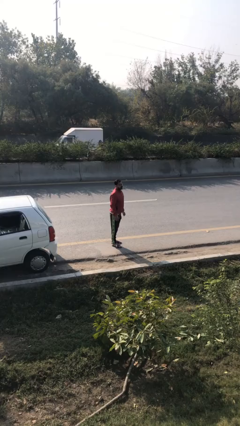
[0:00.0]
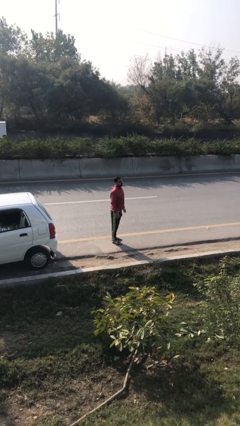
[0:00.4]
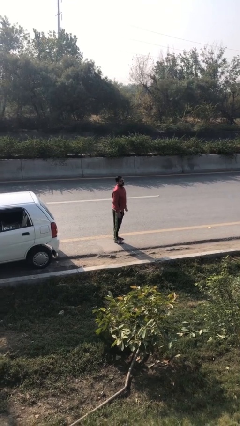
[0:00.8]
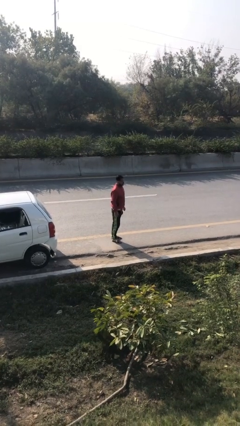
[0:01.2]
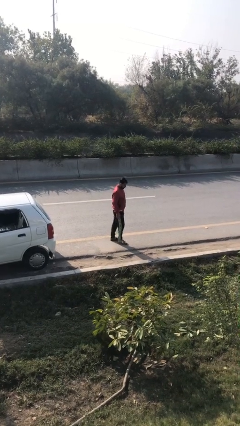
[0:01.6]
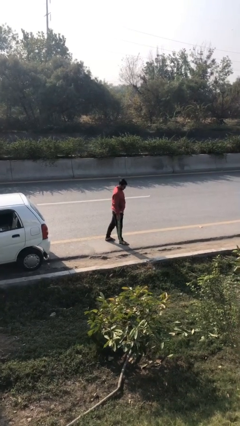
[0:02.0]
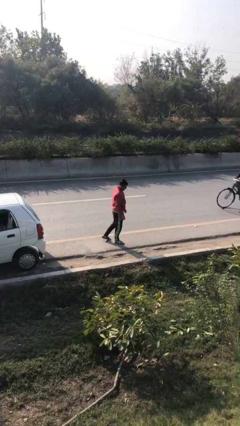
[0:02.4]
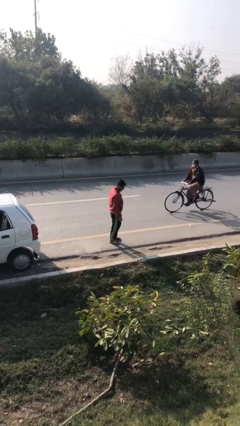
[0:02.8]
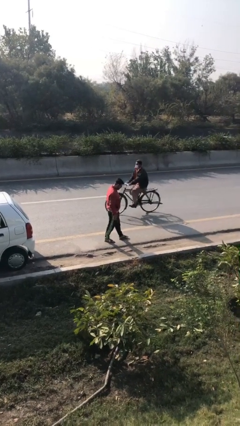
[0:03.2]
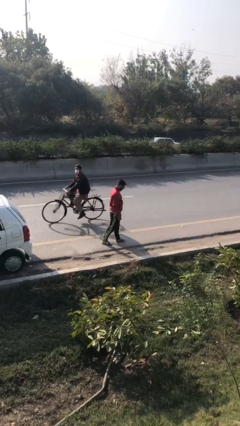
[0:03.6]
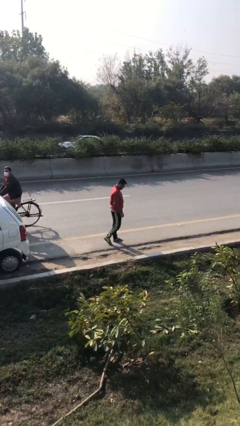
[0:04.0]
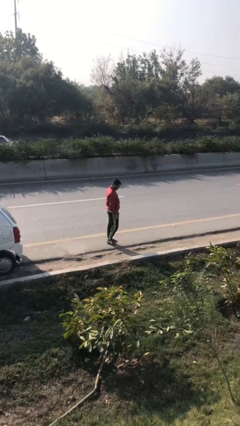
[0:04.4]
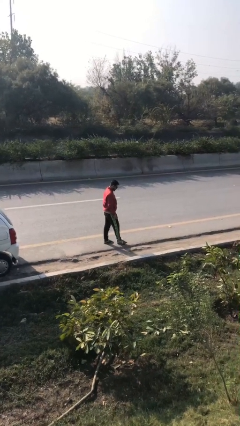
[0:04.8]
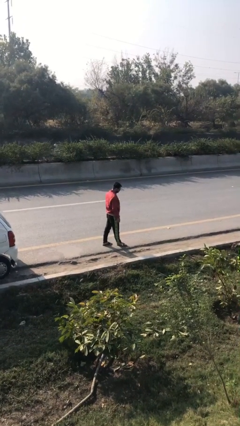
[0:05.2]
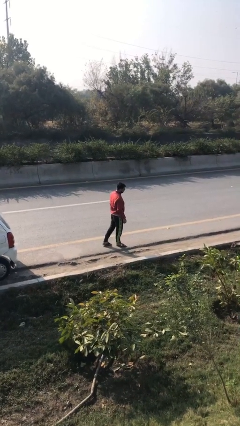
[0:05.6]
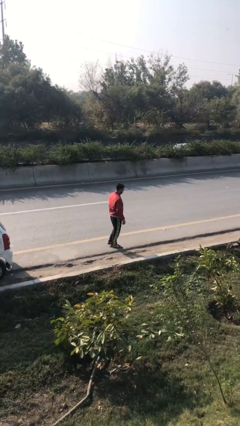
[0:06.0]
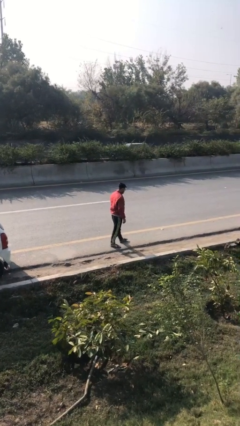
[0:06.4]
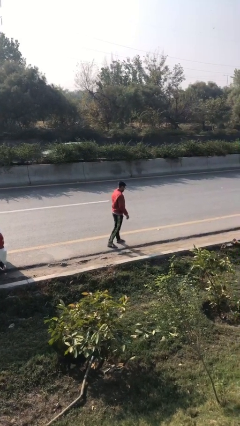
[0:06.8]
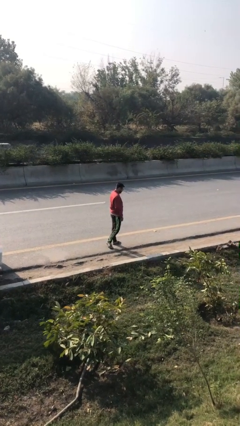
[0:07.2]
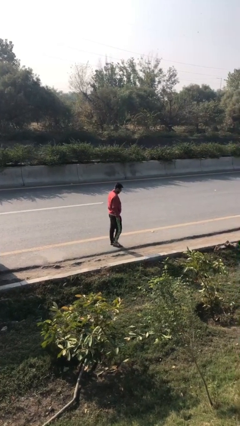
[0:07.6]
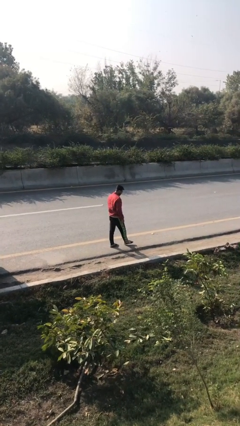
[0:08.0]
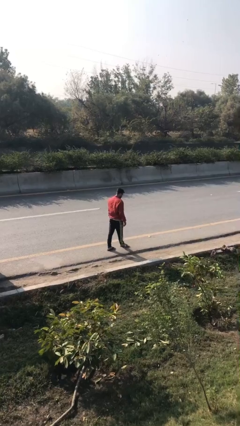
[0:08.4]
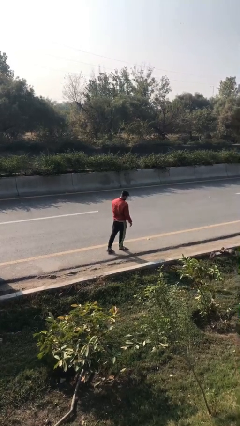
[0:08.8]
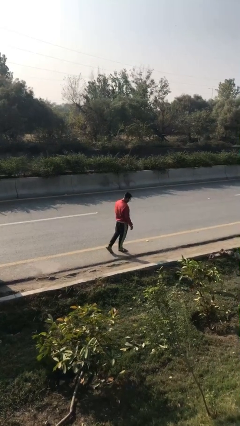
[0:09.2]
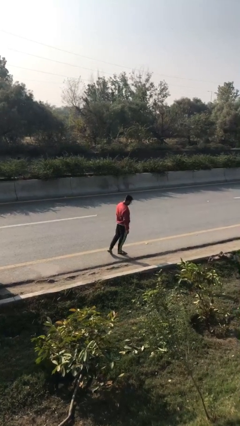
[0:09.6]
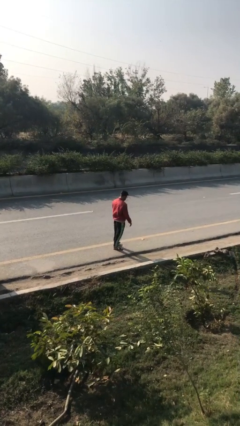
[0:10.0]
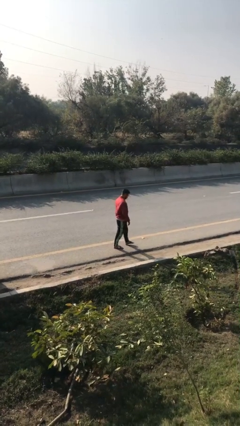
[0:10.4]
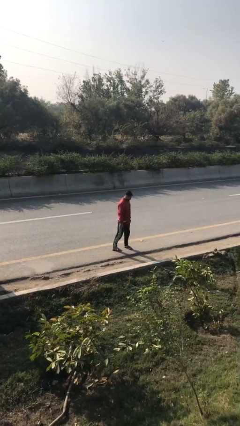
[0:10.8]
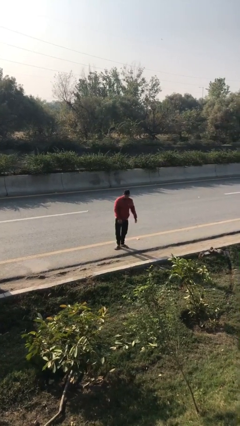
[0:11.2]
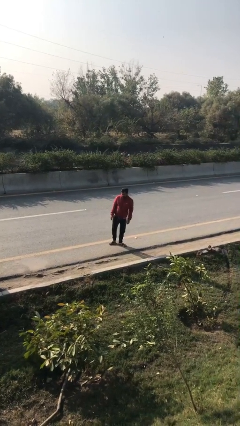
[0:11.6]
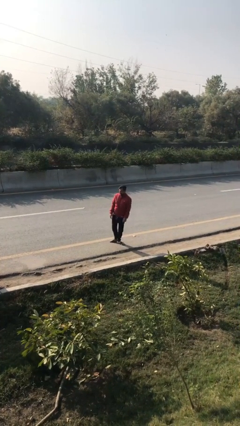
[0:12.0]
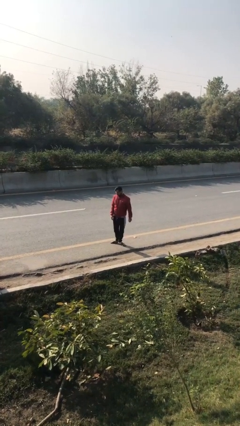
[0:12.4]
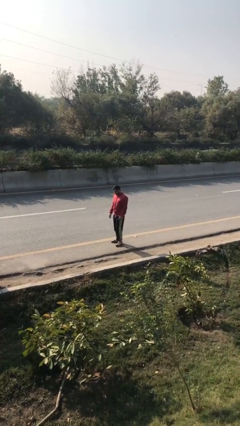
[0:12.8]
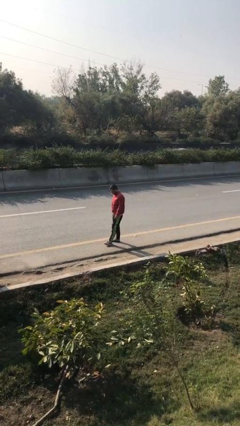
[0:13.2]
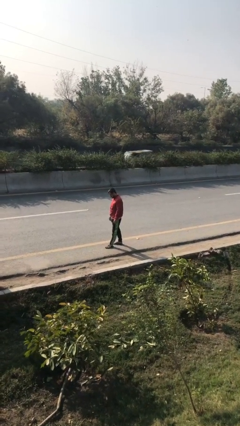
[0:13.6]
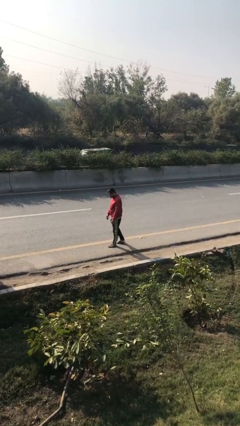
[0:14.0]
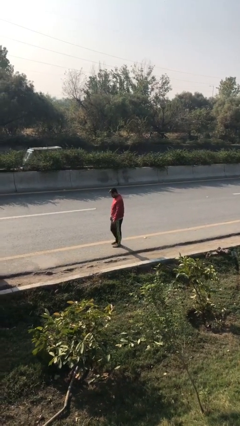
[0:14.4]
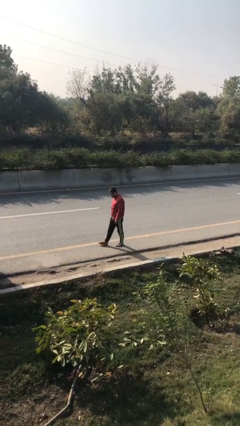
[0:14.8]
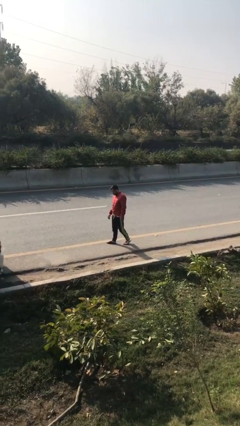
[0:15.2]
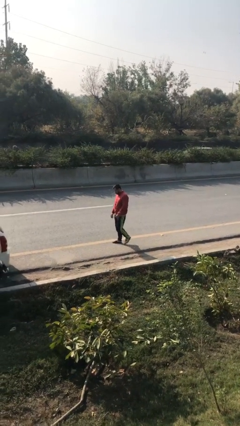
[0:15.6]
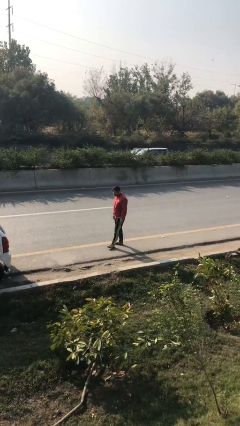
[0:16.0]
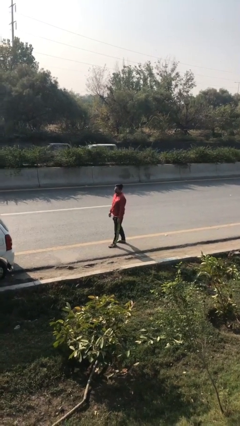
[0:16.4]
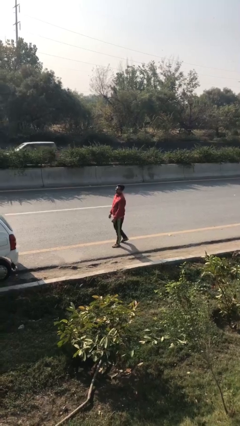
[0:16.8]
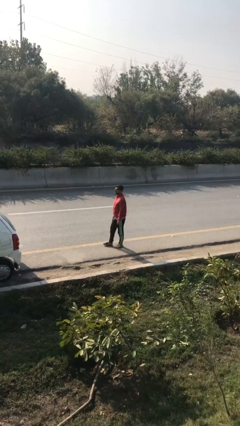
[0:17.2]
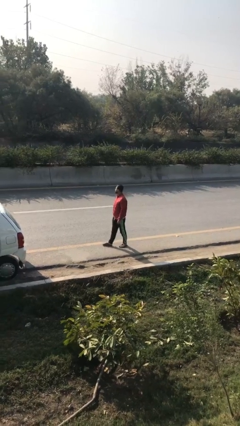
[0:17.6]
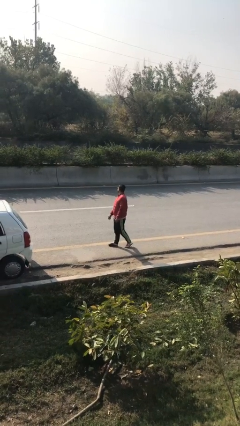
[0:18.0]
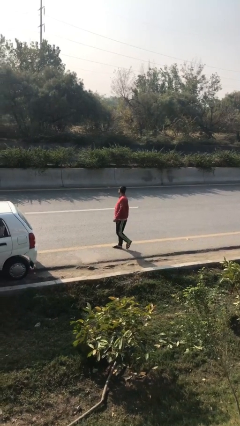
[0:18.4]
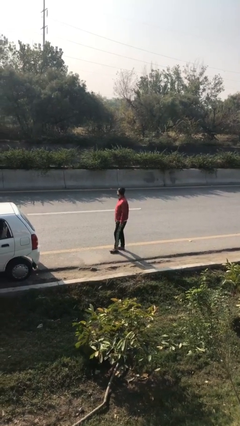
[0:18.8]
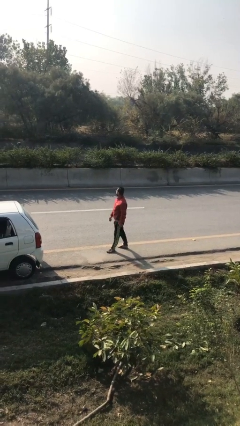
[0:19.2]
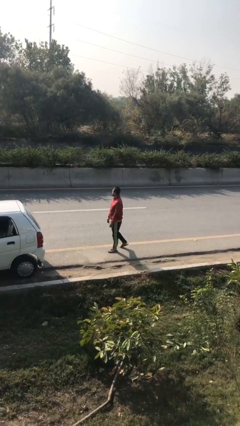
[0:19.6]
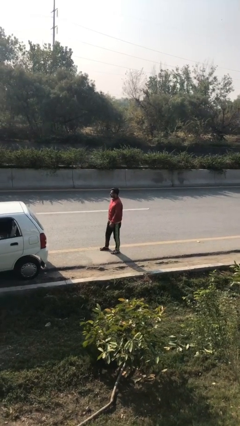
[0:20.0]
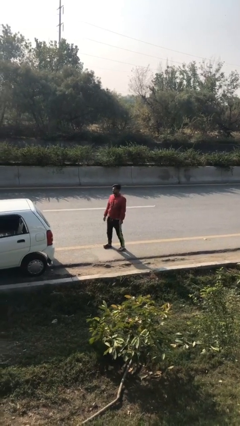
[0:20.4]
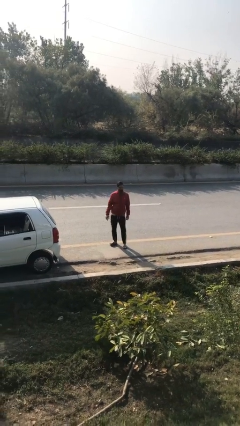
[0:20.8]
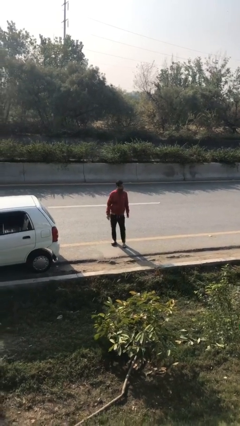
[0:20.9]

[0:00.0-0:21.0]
person walks

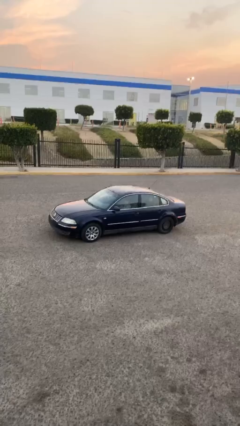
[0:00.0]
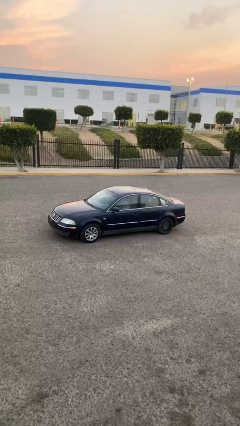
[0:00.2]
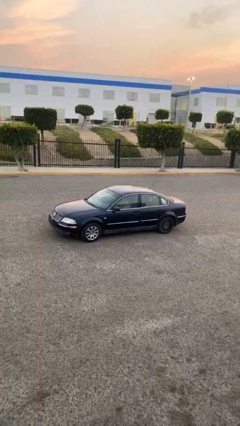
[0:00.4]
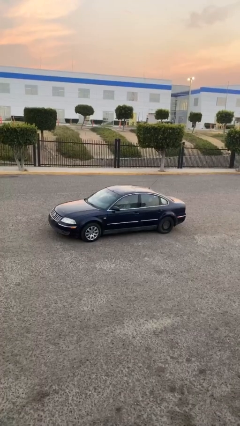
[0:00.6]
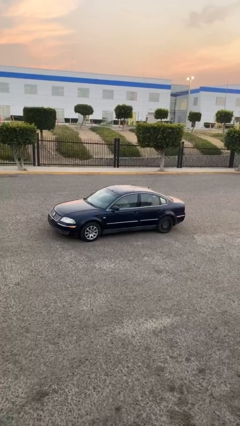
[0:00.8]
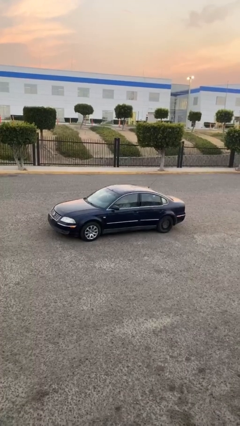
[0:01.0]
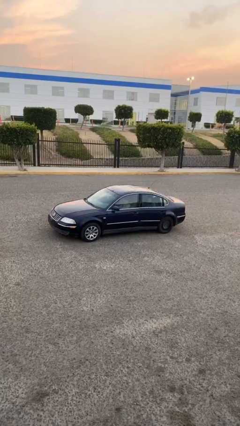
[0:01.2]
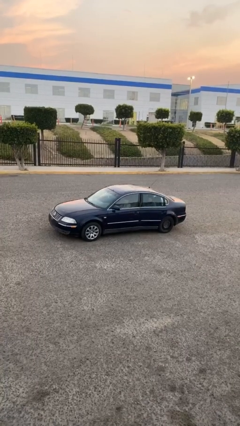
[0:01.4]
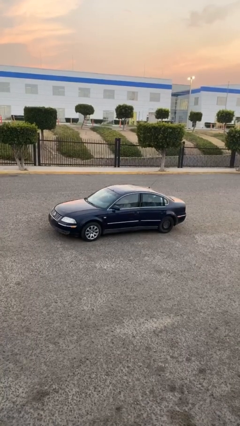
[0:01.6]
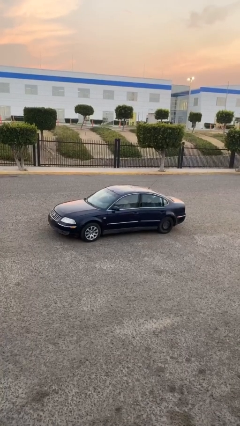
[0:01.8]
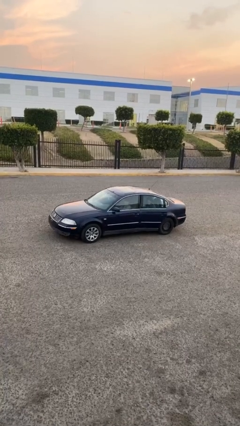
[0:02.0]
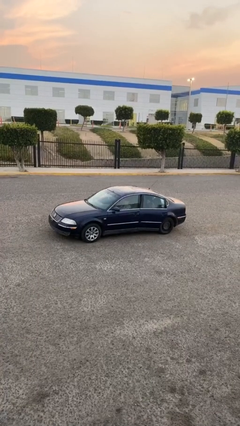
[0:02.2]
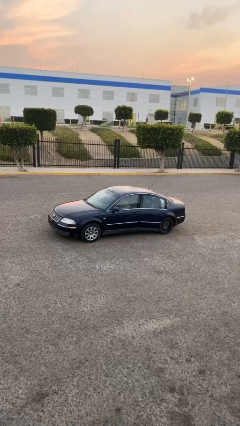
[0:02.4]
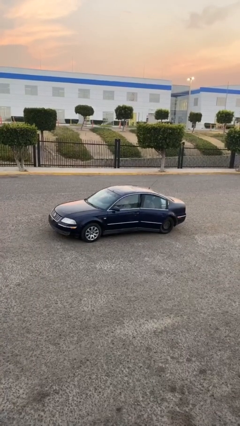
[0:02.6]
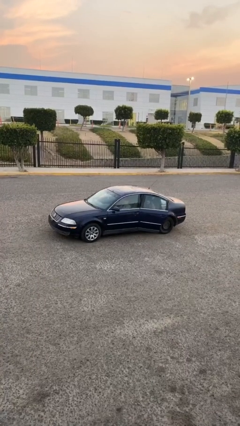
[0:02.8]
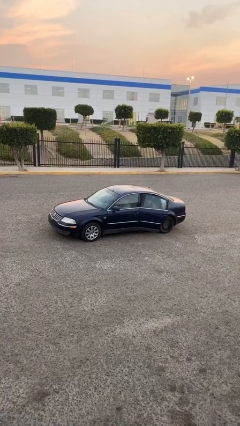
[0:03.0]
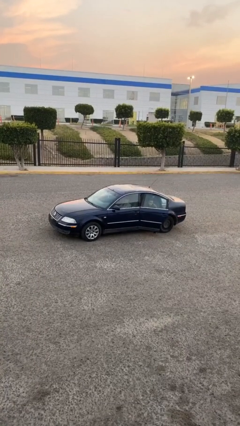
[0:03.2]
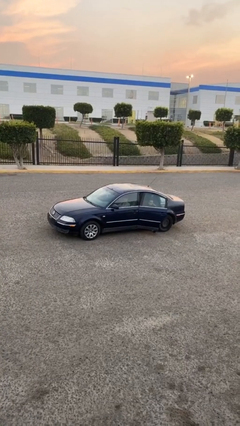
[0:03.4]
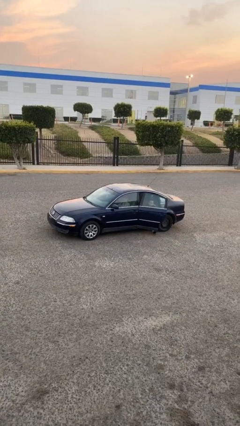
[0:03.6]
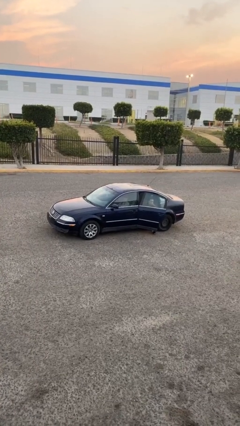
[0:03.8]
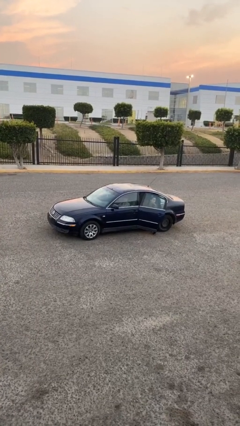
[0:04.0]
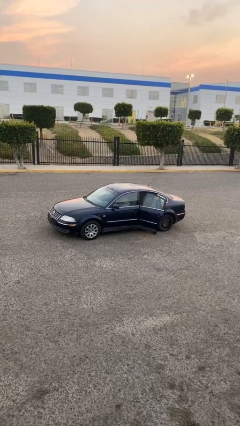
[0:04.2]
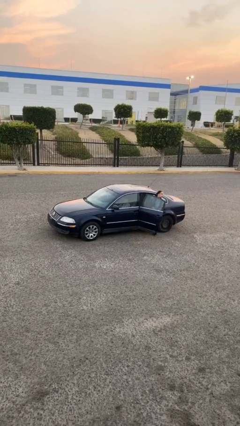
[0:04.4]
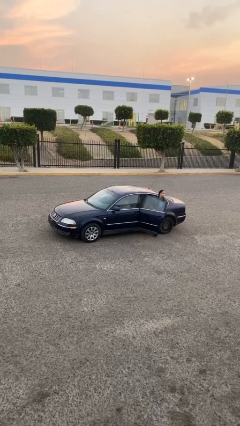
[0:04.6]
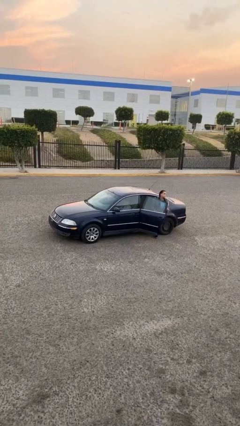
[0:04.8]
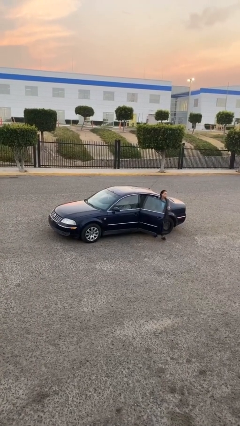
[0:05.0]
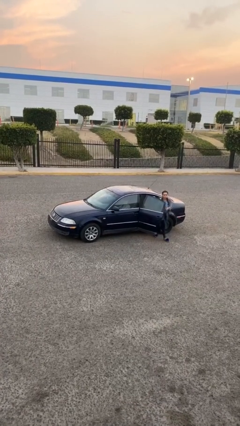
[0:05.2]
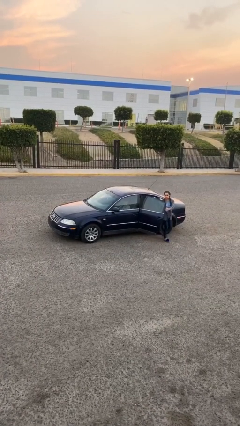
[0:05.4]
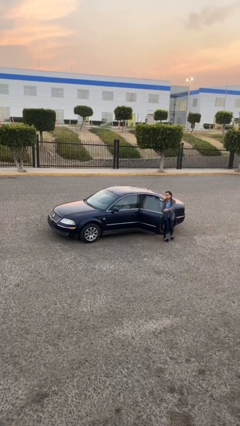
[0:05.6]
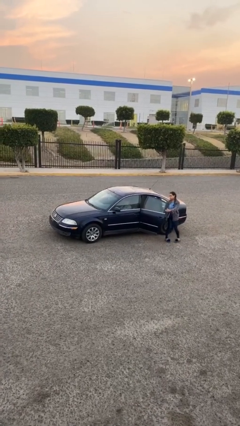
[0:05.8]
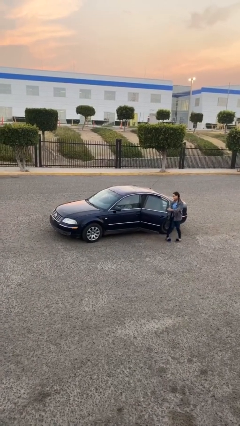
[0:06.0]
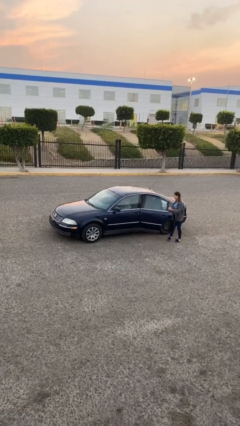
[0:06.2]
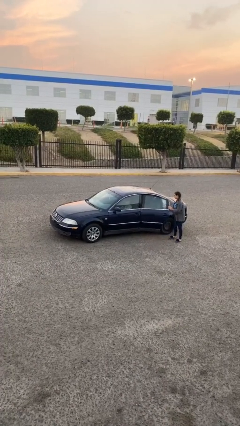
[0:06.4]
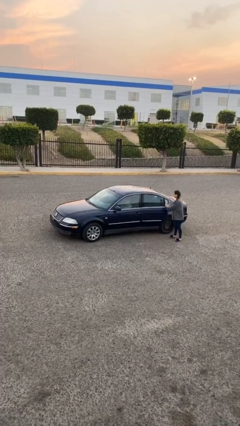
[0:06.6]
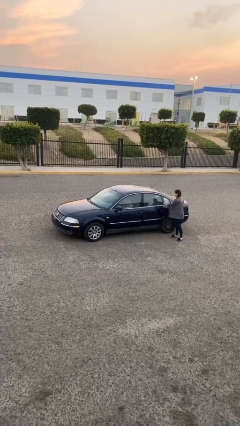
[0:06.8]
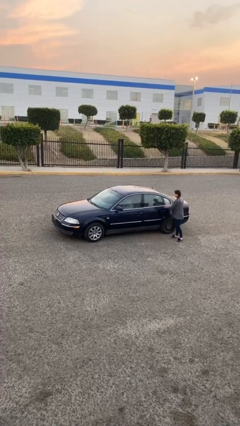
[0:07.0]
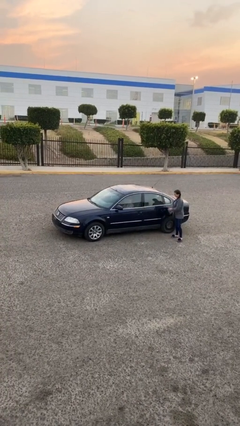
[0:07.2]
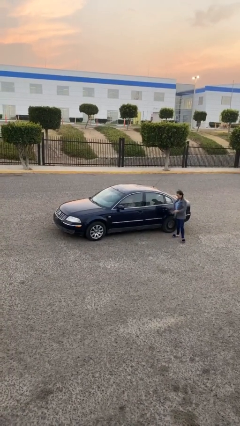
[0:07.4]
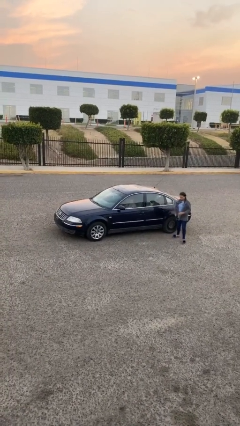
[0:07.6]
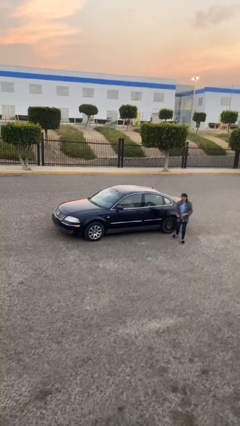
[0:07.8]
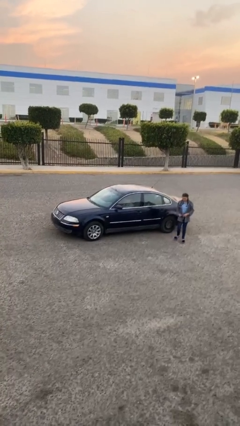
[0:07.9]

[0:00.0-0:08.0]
car drops off person
